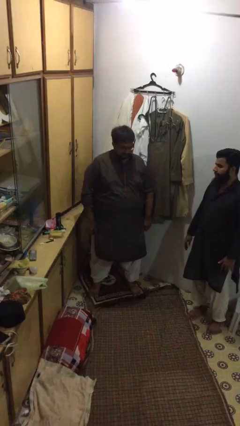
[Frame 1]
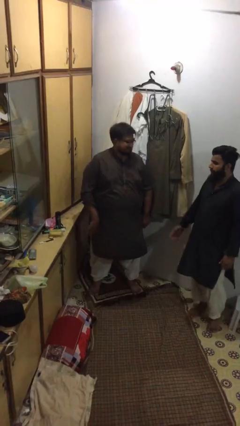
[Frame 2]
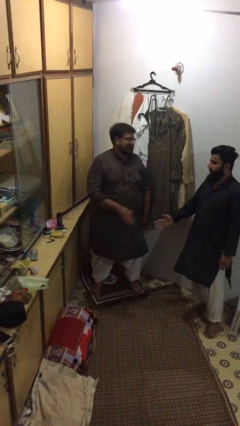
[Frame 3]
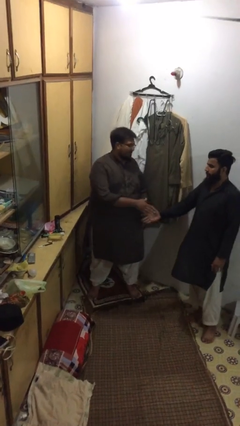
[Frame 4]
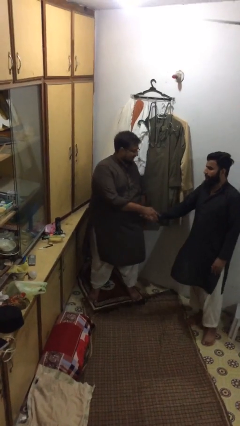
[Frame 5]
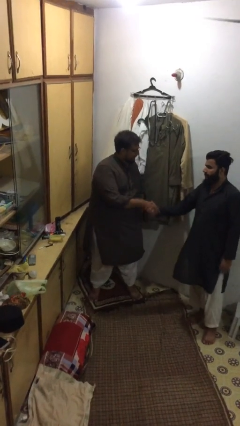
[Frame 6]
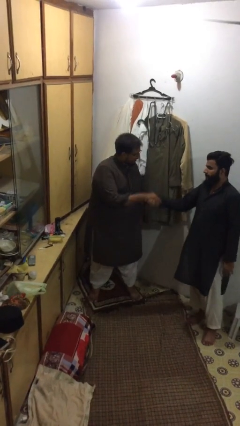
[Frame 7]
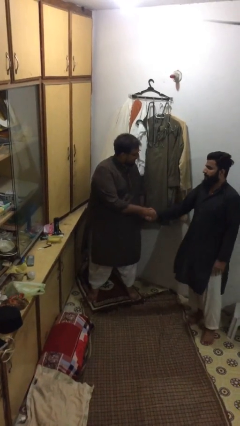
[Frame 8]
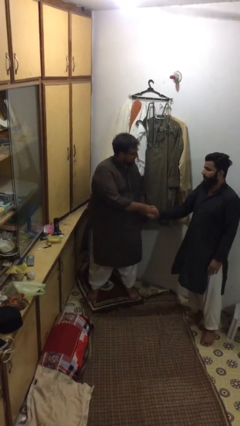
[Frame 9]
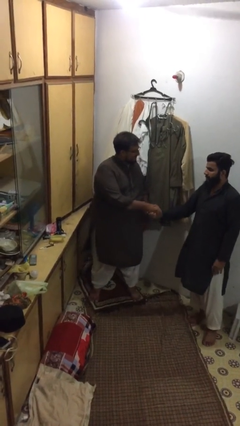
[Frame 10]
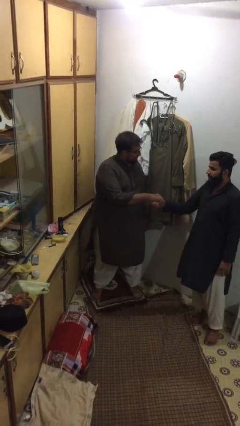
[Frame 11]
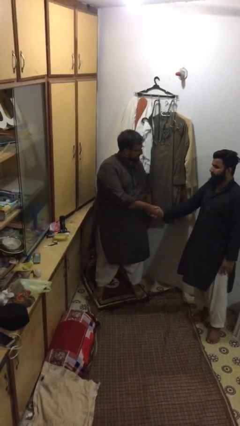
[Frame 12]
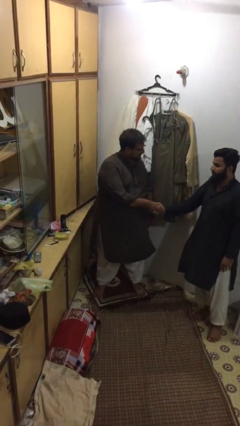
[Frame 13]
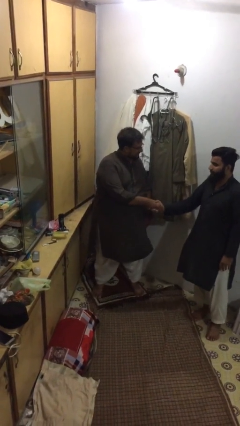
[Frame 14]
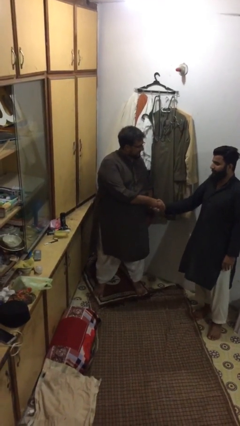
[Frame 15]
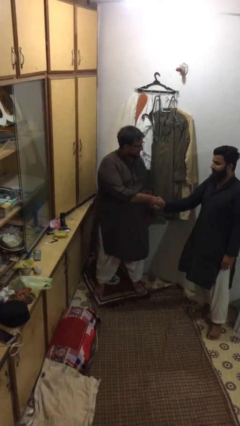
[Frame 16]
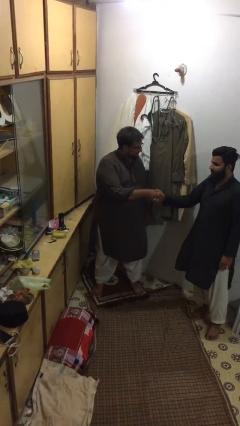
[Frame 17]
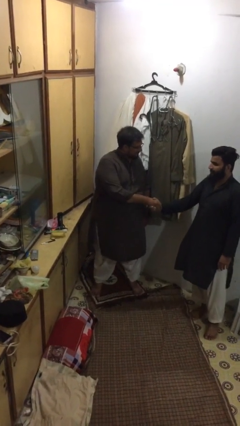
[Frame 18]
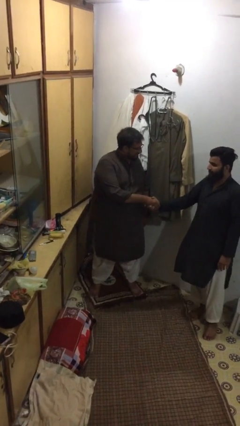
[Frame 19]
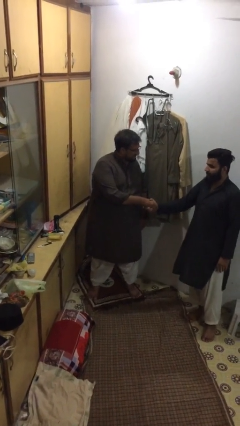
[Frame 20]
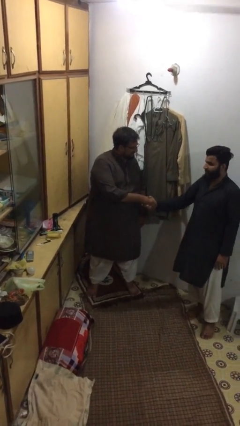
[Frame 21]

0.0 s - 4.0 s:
person shakes hand

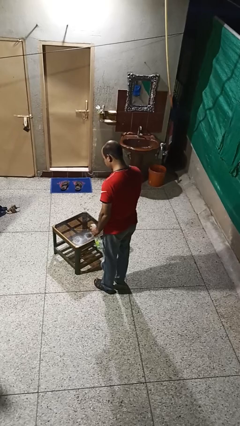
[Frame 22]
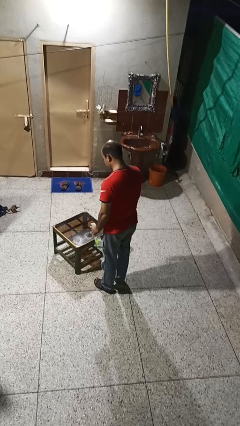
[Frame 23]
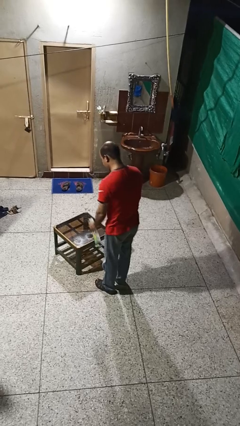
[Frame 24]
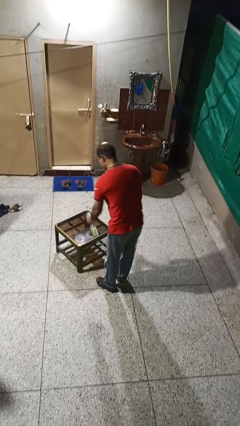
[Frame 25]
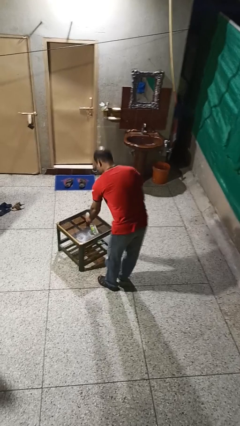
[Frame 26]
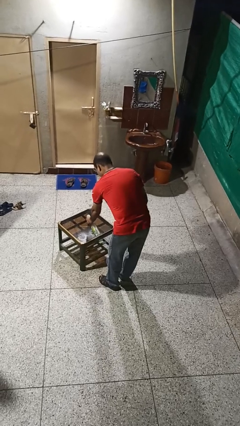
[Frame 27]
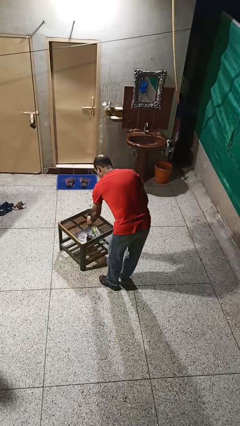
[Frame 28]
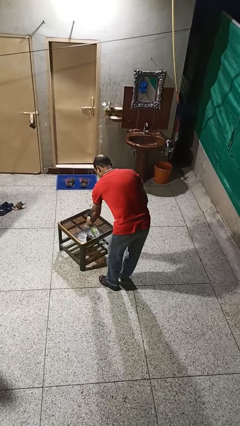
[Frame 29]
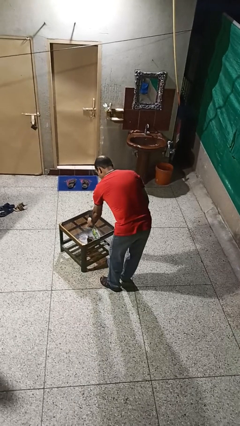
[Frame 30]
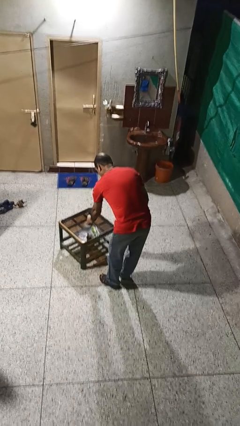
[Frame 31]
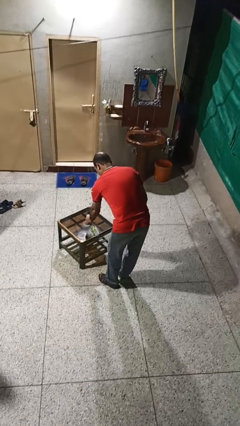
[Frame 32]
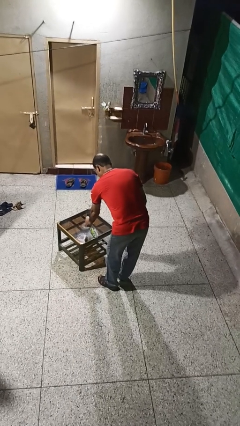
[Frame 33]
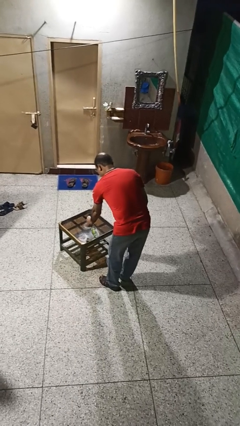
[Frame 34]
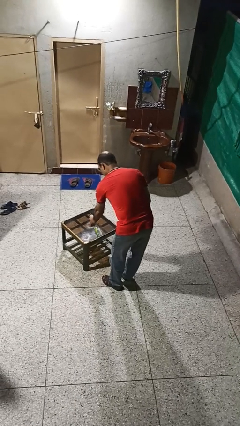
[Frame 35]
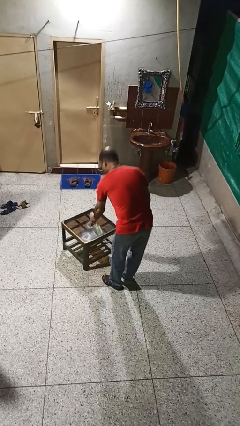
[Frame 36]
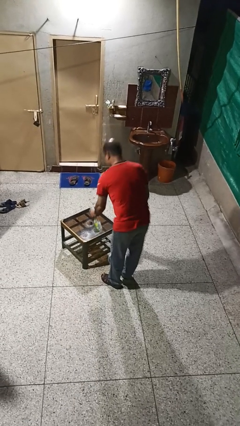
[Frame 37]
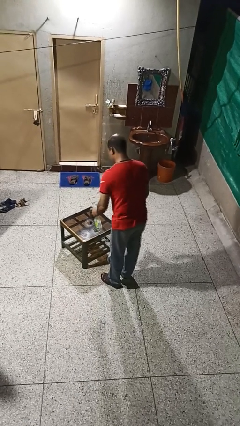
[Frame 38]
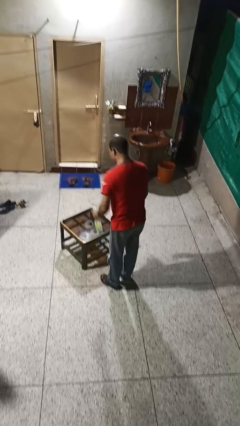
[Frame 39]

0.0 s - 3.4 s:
person sprays from bottle

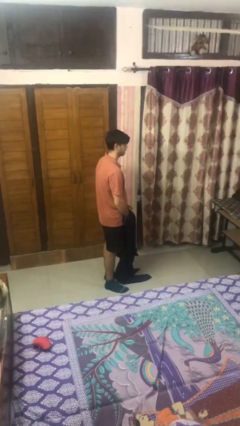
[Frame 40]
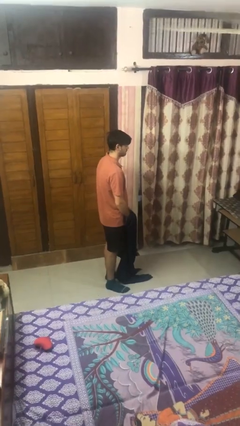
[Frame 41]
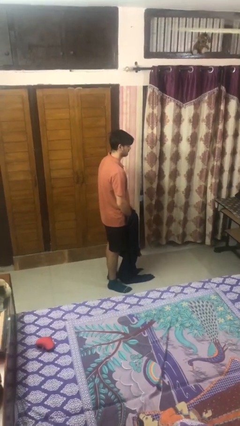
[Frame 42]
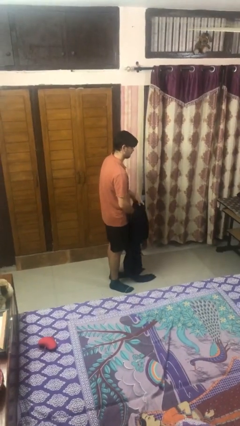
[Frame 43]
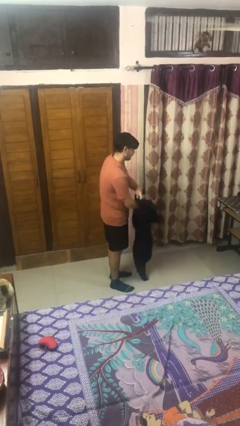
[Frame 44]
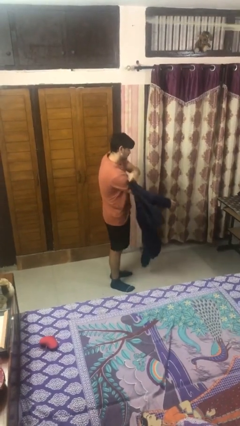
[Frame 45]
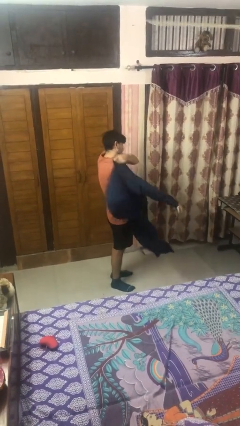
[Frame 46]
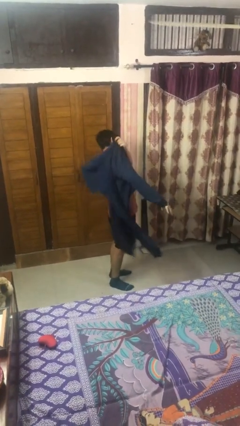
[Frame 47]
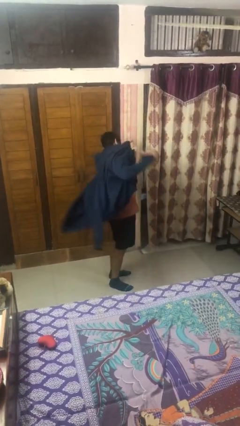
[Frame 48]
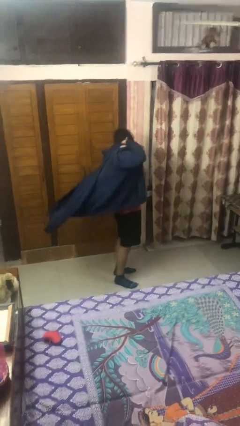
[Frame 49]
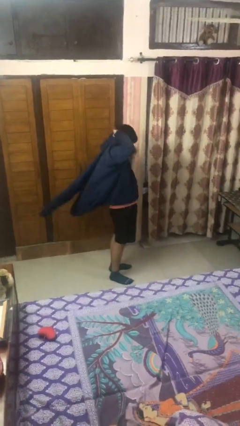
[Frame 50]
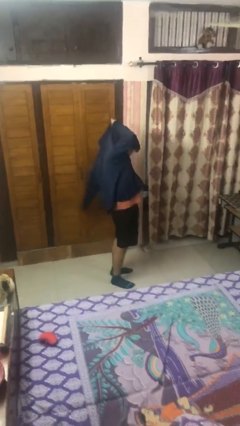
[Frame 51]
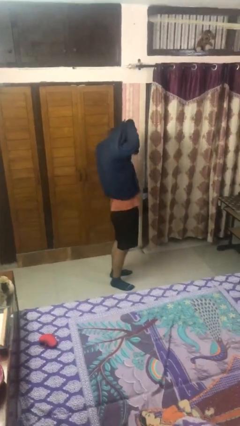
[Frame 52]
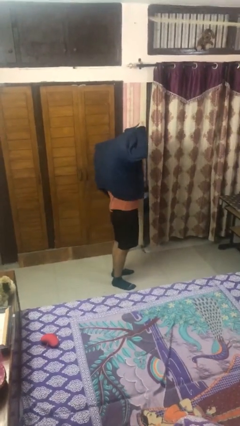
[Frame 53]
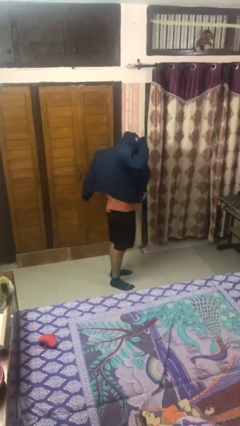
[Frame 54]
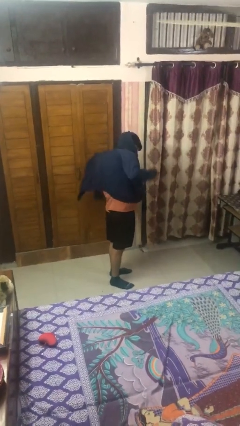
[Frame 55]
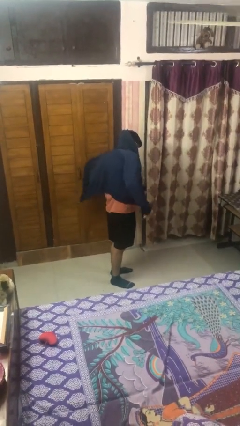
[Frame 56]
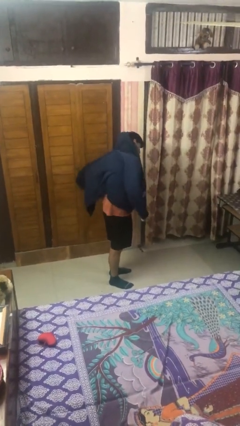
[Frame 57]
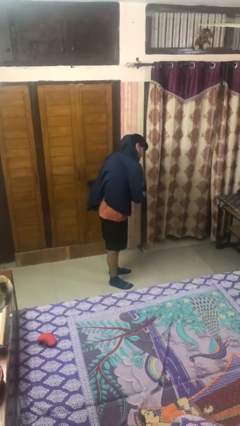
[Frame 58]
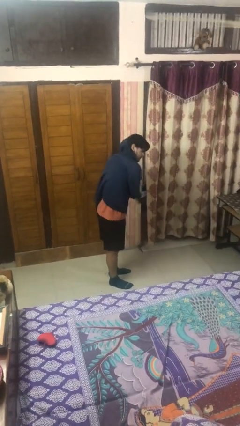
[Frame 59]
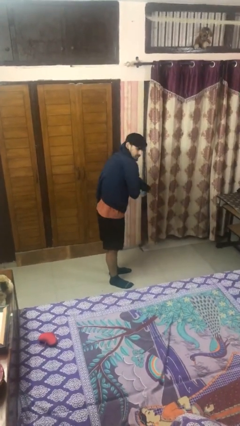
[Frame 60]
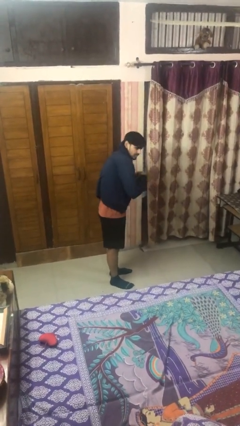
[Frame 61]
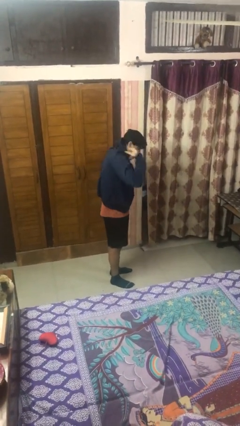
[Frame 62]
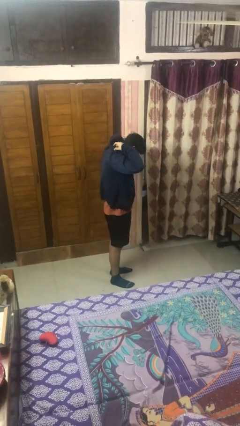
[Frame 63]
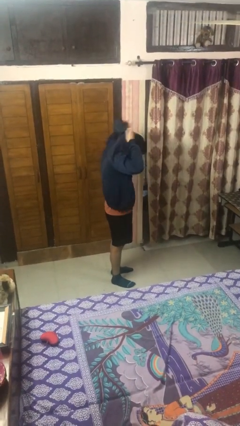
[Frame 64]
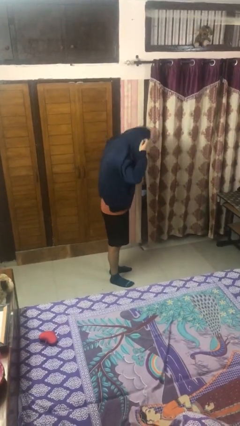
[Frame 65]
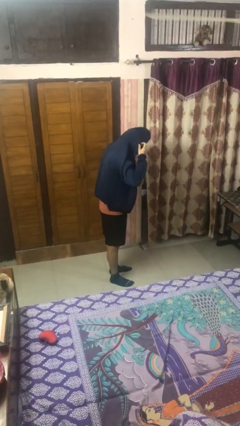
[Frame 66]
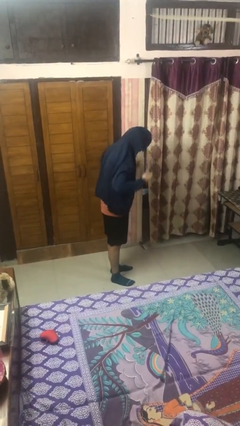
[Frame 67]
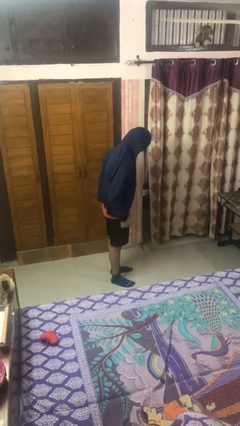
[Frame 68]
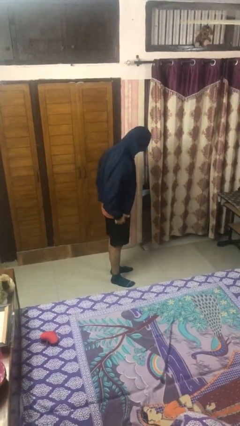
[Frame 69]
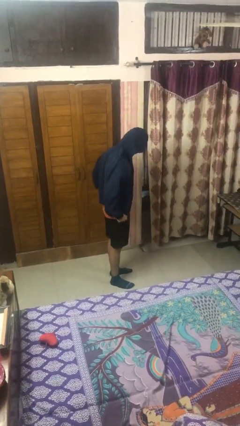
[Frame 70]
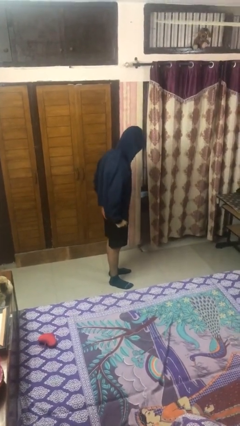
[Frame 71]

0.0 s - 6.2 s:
person puts on hoodie

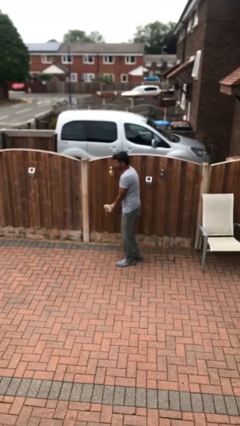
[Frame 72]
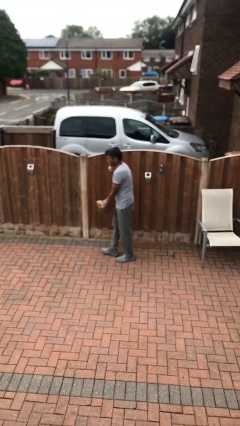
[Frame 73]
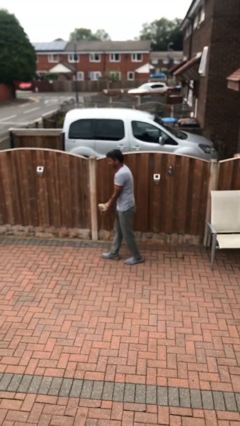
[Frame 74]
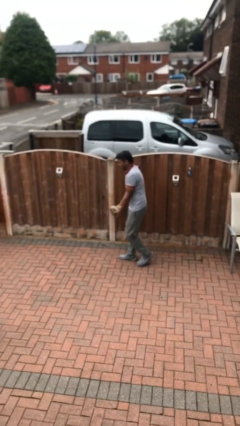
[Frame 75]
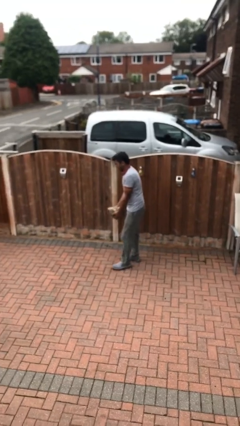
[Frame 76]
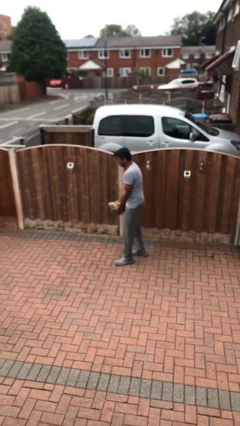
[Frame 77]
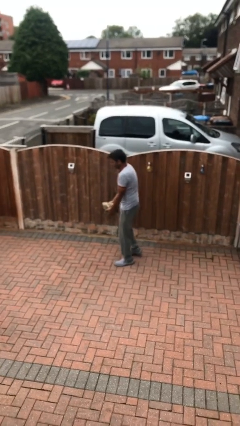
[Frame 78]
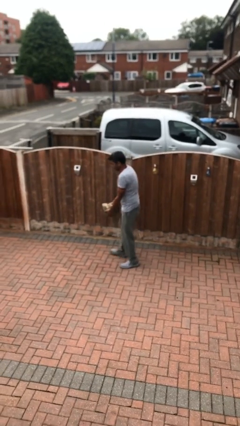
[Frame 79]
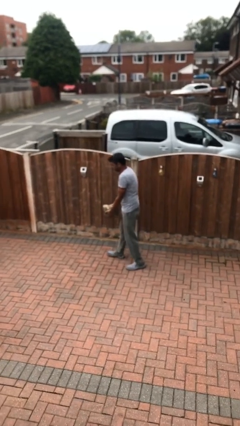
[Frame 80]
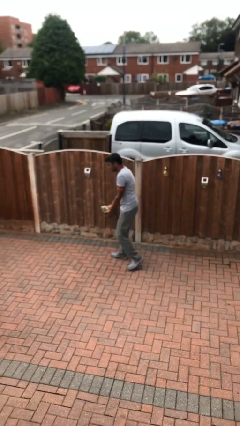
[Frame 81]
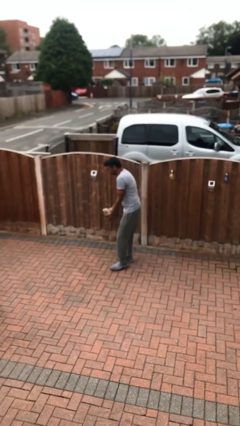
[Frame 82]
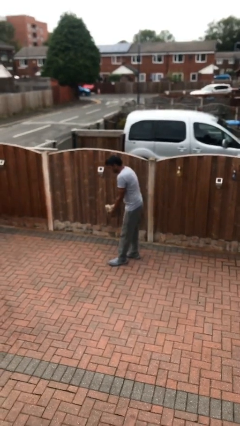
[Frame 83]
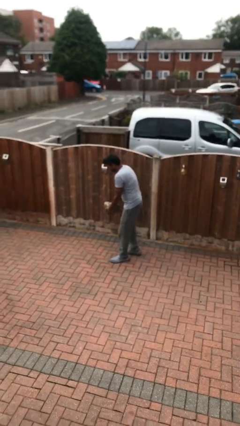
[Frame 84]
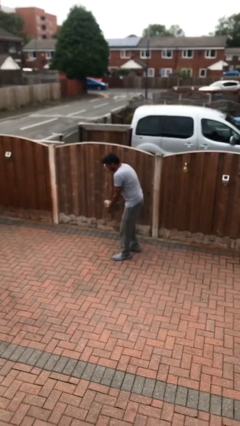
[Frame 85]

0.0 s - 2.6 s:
person carries heavy object

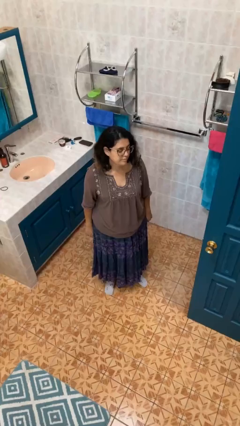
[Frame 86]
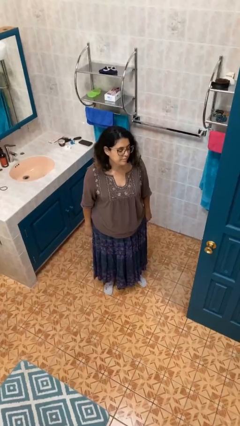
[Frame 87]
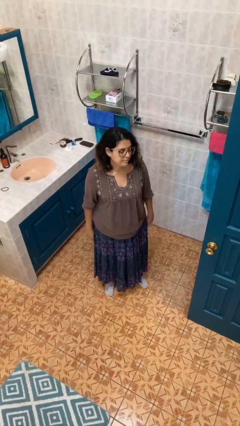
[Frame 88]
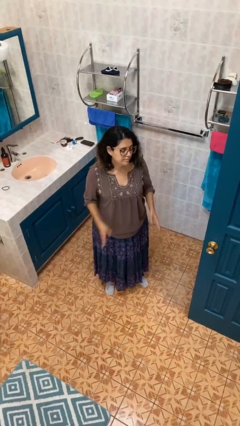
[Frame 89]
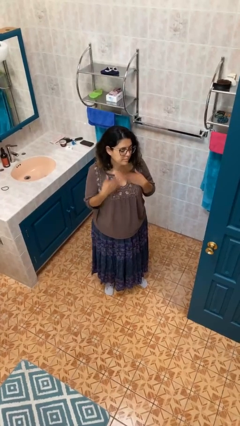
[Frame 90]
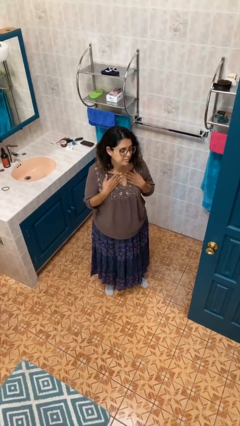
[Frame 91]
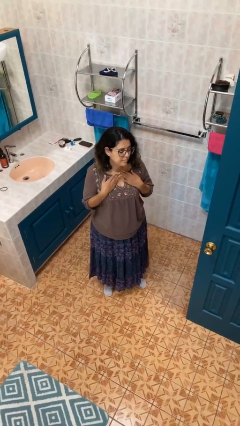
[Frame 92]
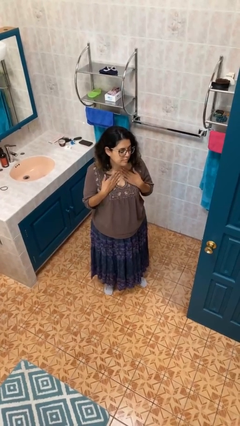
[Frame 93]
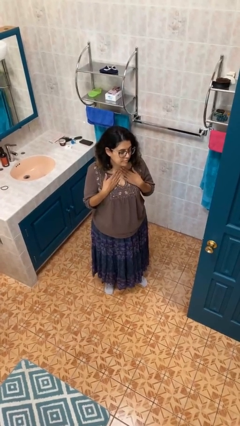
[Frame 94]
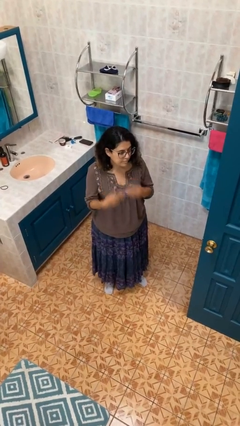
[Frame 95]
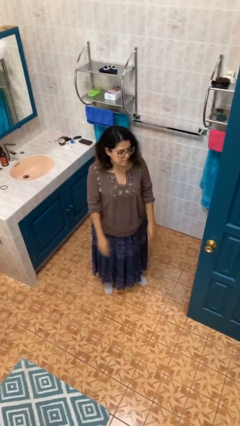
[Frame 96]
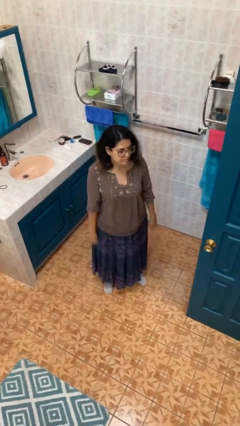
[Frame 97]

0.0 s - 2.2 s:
person drums on chest
